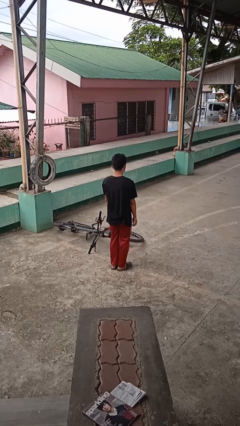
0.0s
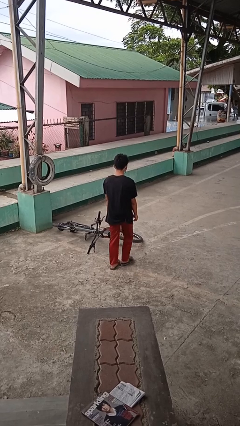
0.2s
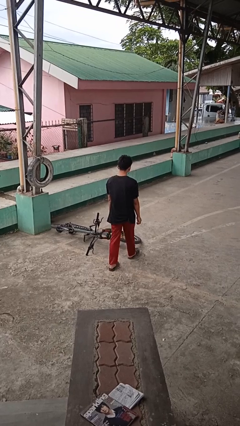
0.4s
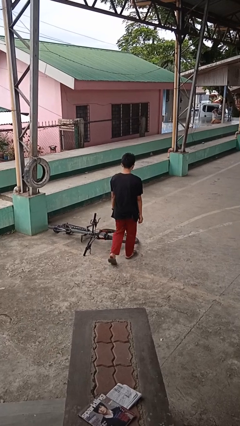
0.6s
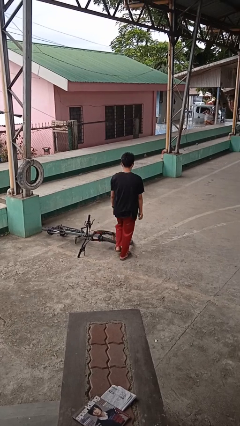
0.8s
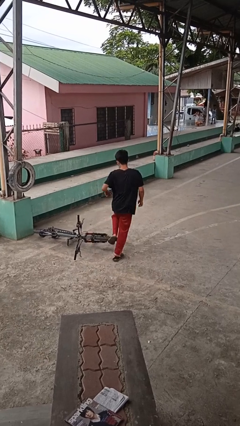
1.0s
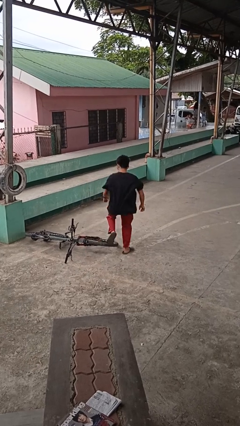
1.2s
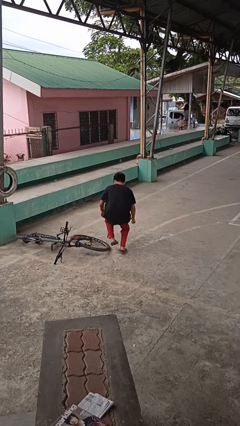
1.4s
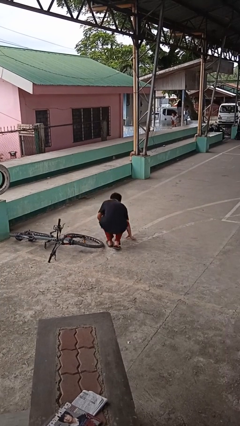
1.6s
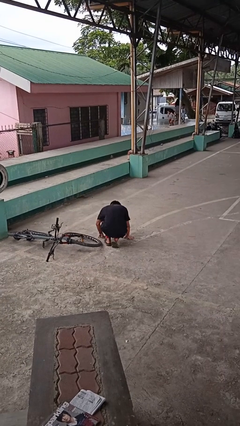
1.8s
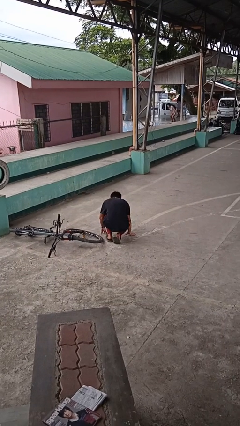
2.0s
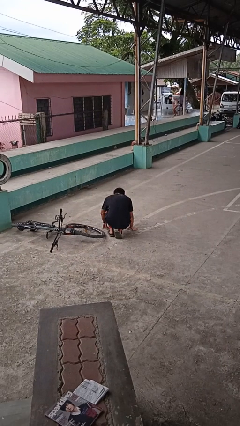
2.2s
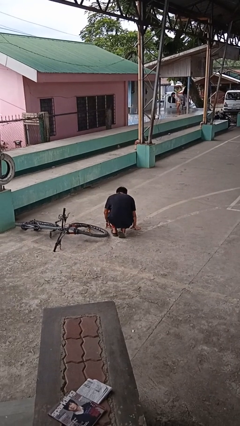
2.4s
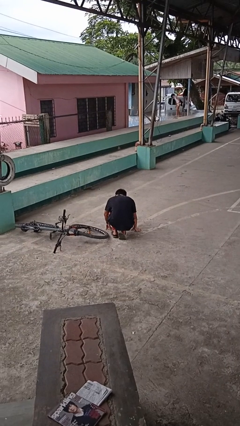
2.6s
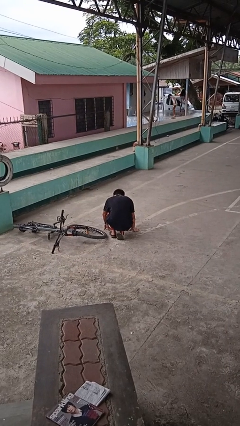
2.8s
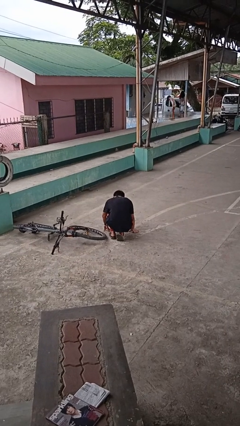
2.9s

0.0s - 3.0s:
person trips on object on floor

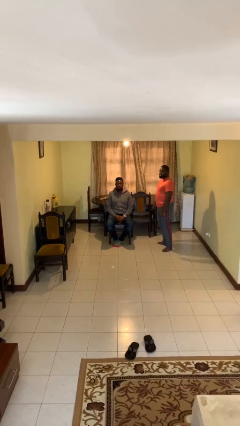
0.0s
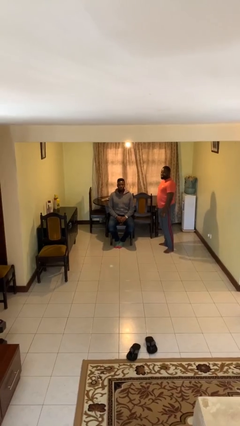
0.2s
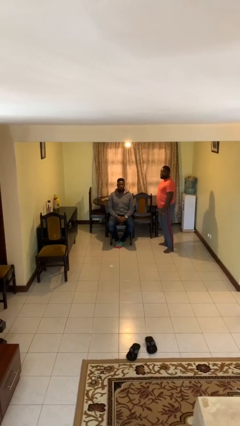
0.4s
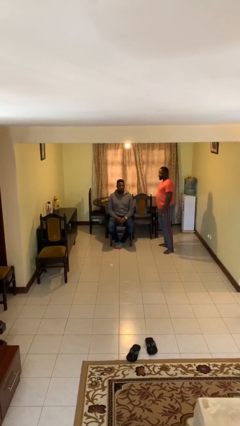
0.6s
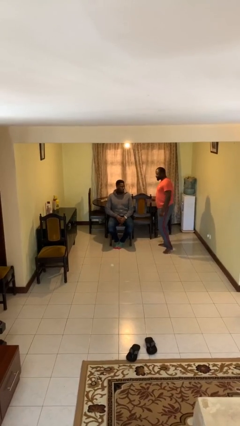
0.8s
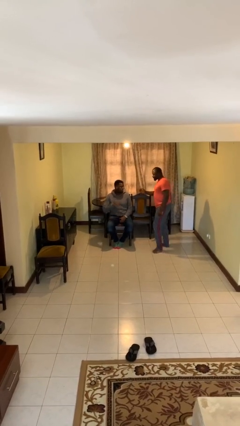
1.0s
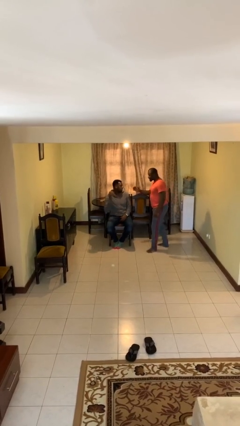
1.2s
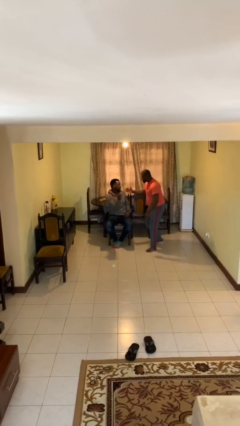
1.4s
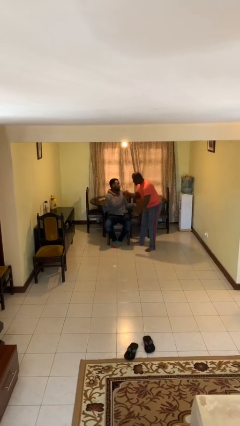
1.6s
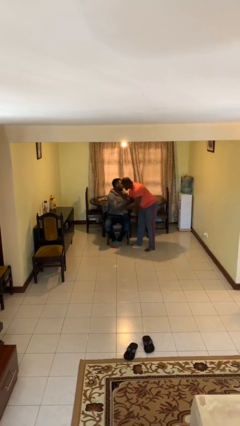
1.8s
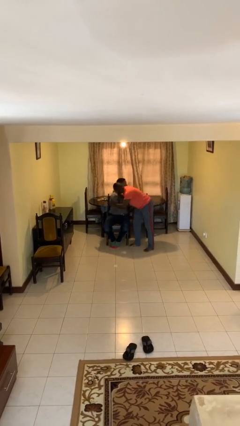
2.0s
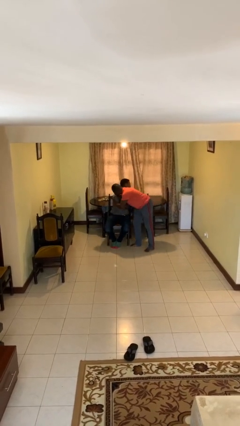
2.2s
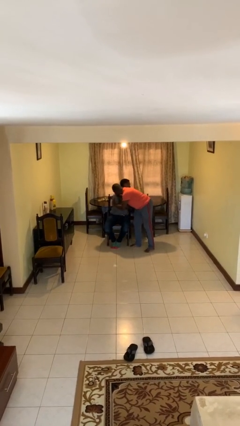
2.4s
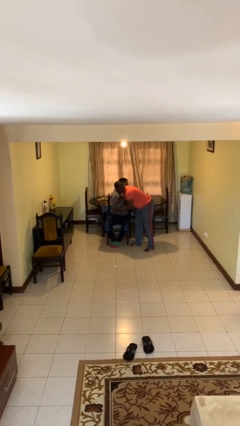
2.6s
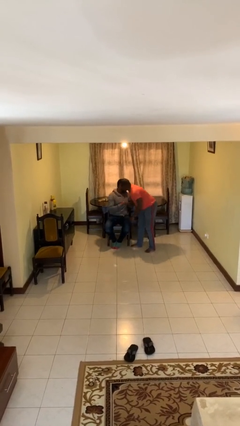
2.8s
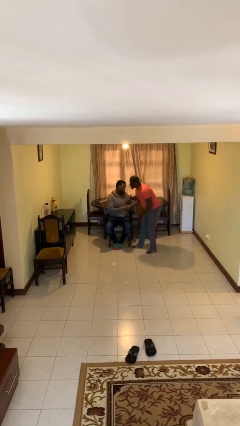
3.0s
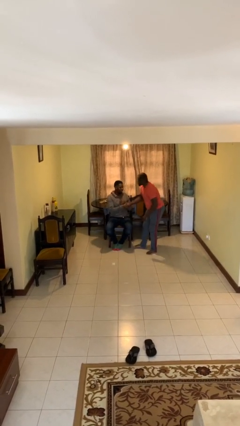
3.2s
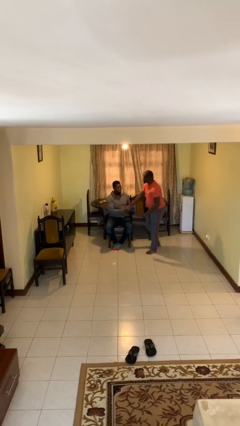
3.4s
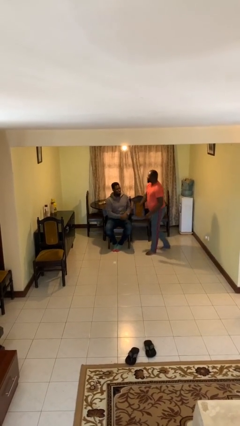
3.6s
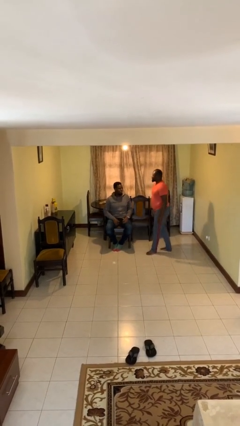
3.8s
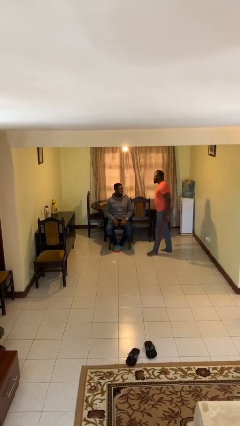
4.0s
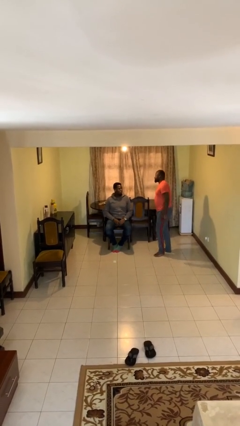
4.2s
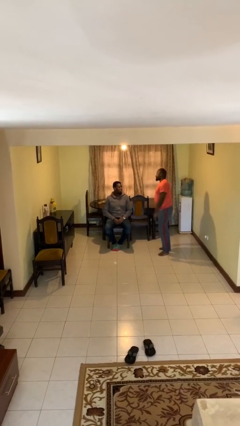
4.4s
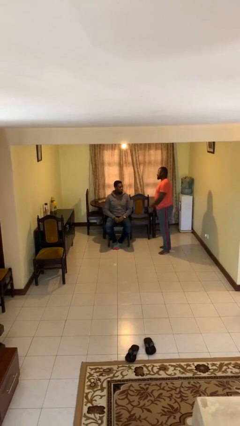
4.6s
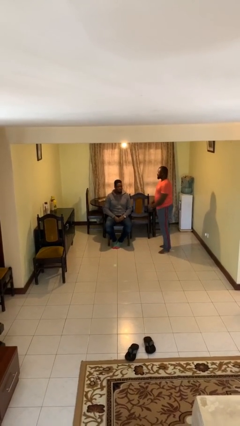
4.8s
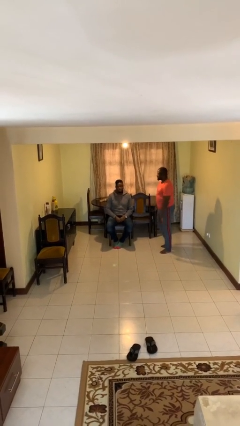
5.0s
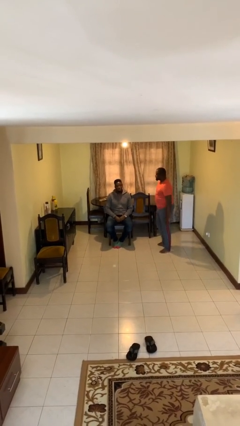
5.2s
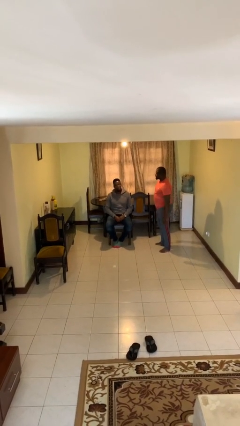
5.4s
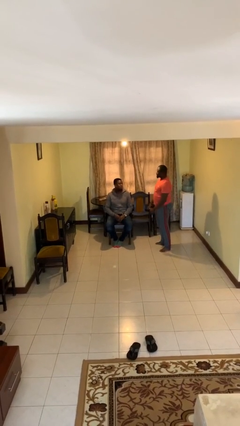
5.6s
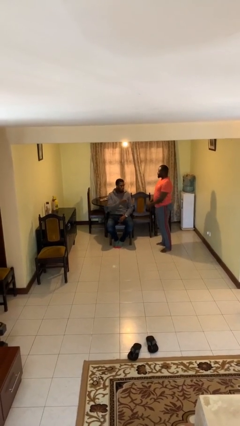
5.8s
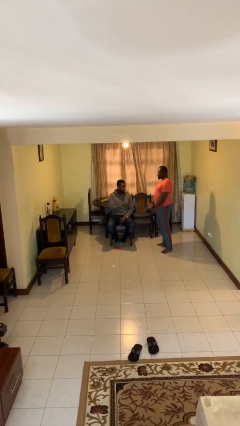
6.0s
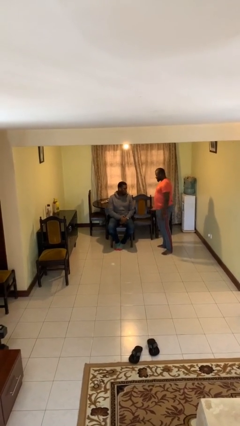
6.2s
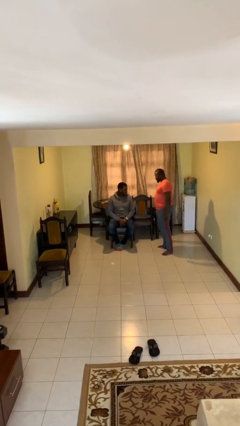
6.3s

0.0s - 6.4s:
person embraces person

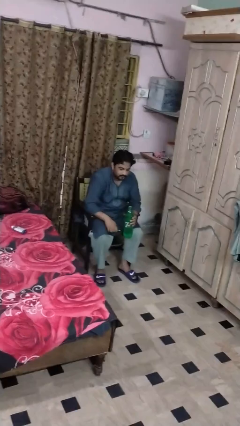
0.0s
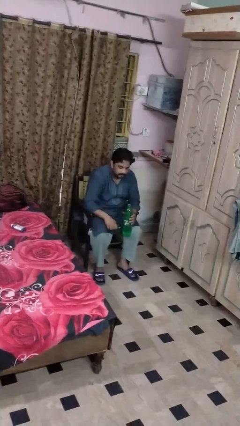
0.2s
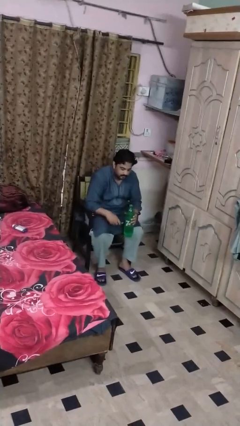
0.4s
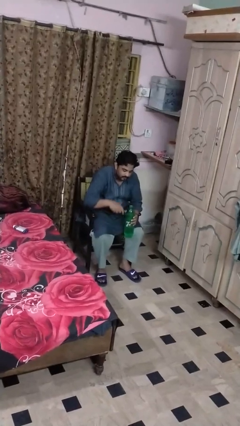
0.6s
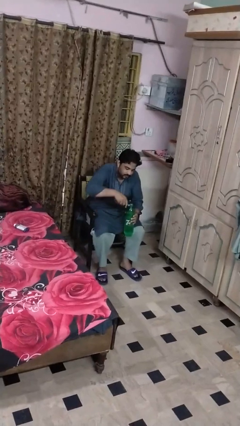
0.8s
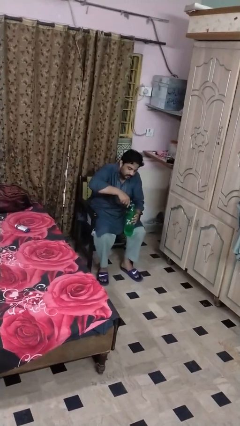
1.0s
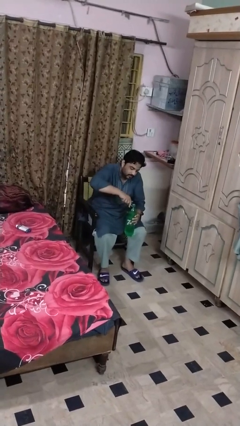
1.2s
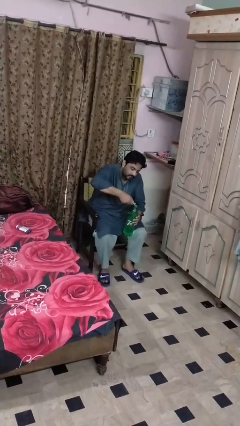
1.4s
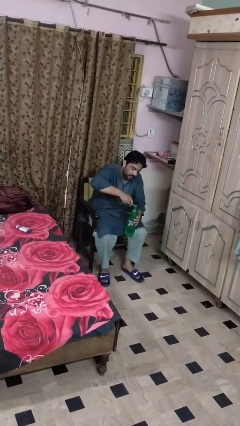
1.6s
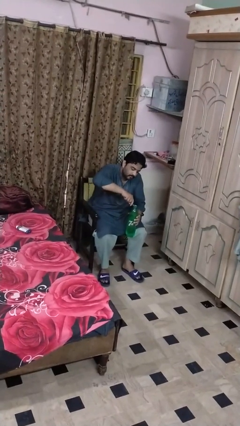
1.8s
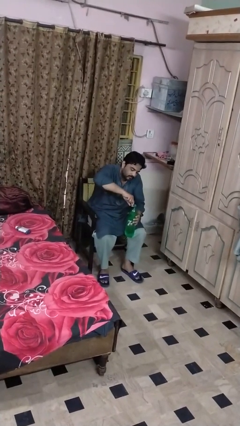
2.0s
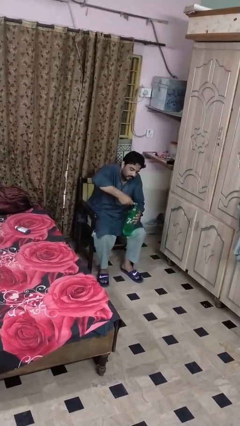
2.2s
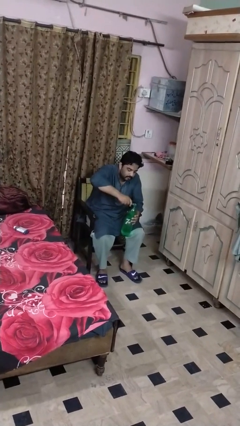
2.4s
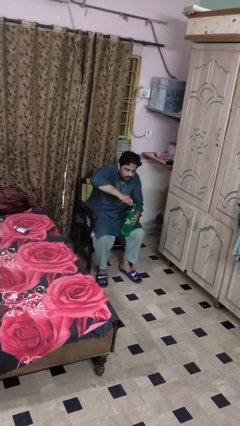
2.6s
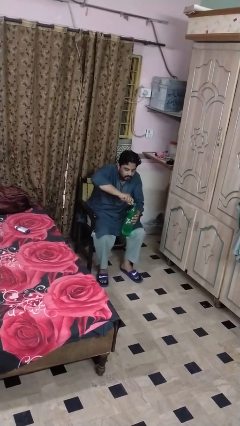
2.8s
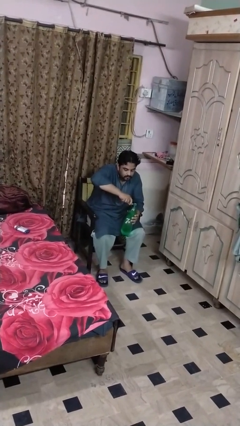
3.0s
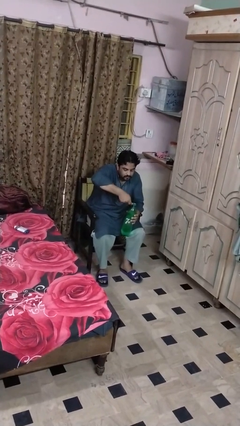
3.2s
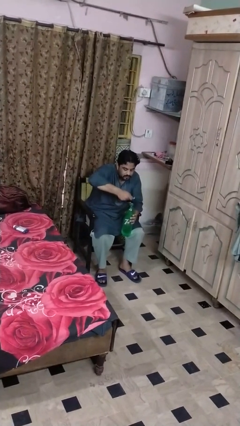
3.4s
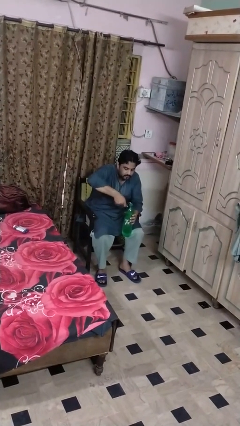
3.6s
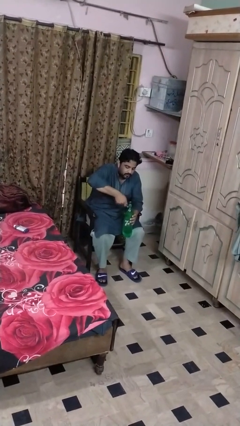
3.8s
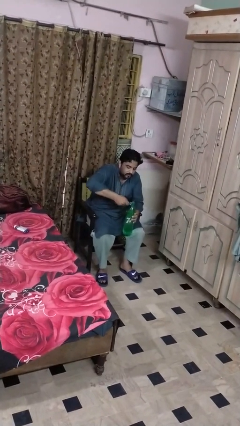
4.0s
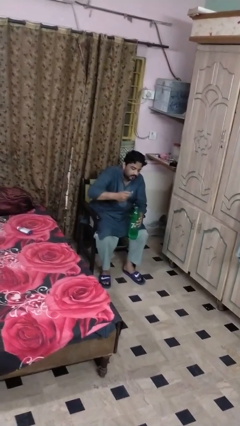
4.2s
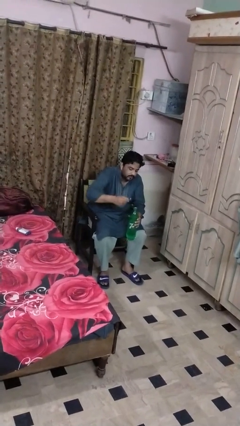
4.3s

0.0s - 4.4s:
person opens can with can opener

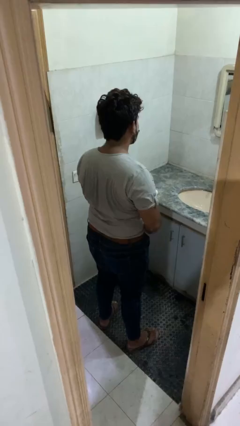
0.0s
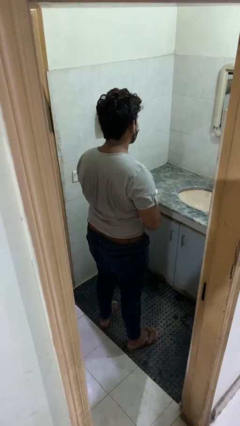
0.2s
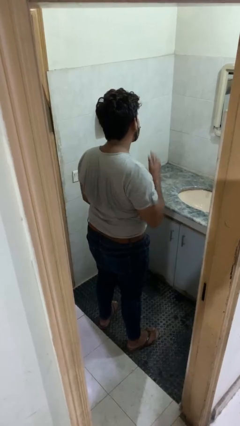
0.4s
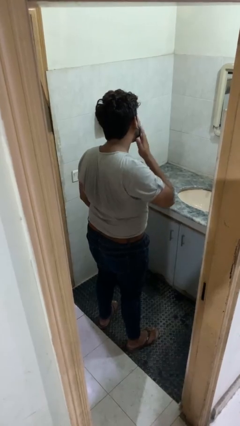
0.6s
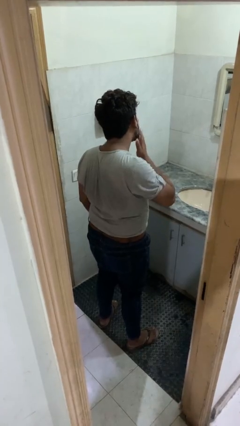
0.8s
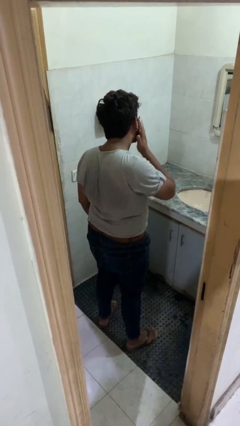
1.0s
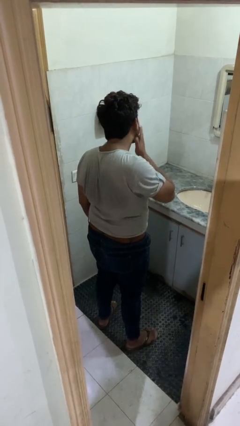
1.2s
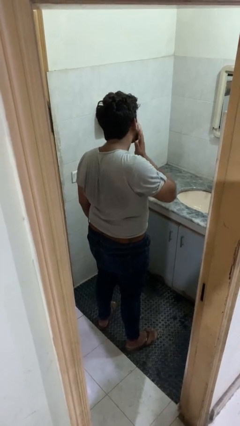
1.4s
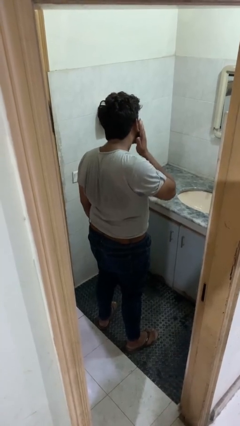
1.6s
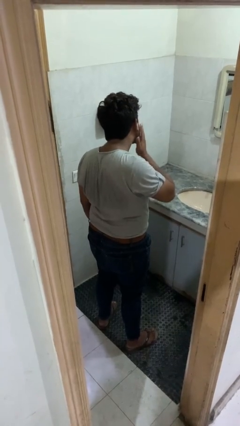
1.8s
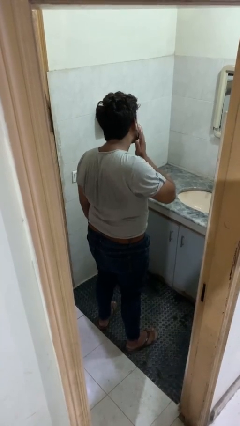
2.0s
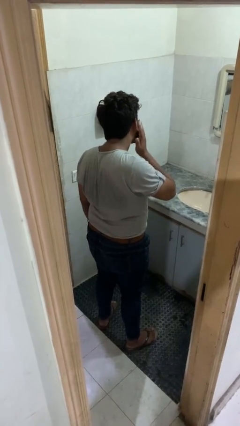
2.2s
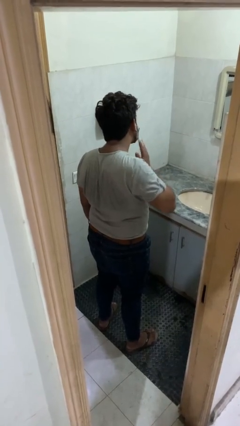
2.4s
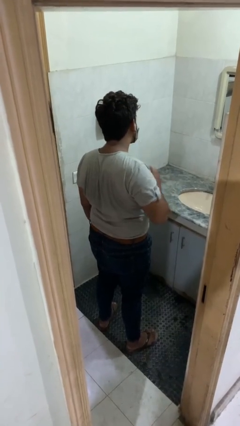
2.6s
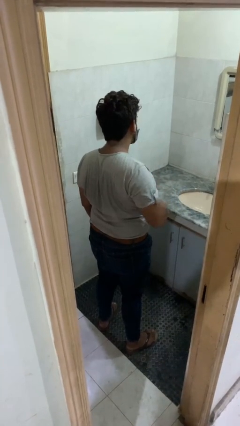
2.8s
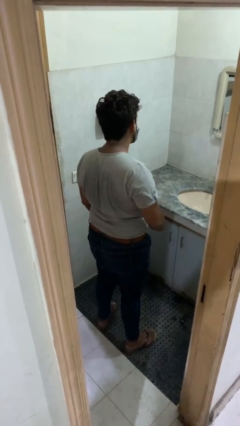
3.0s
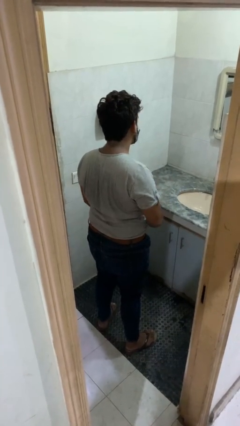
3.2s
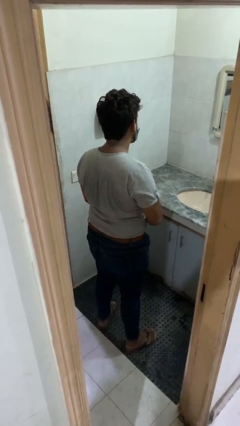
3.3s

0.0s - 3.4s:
person applies shaving cream
